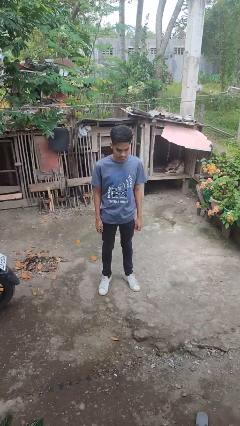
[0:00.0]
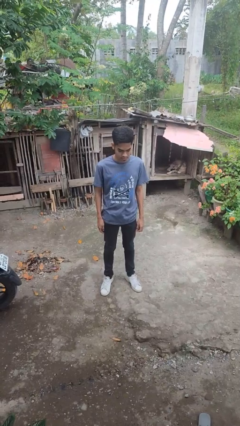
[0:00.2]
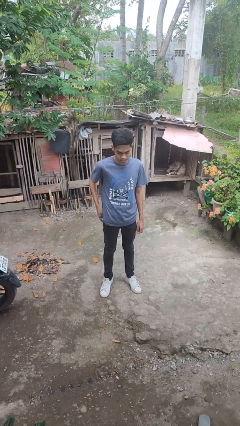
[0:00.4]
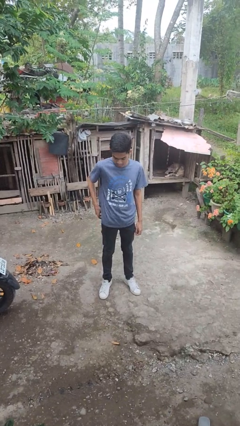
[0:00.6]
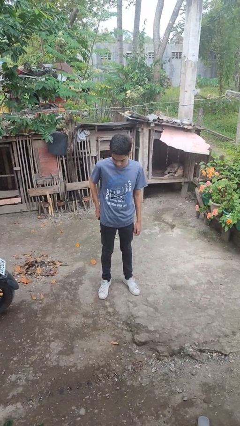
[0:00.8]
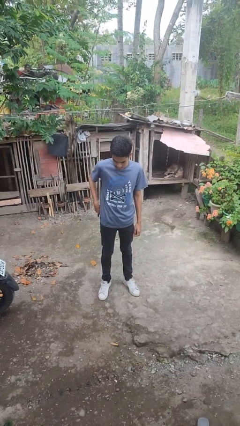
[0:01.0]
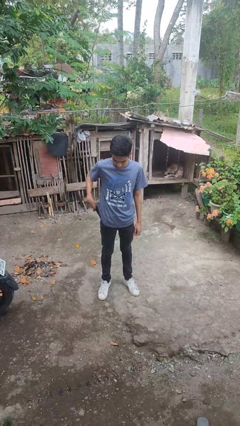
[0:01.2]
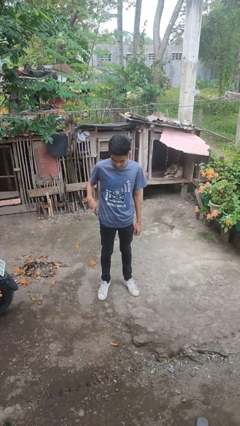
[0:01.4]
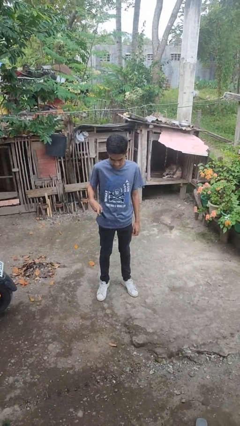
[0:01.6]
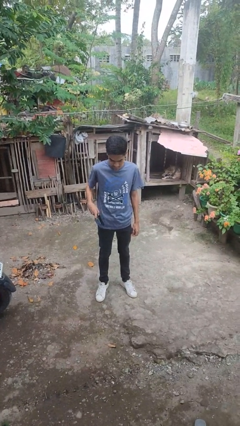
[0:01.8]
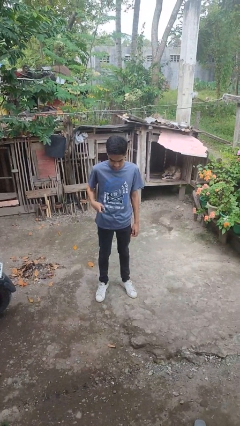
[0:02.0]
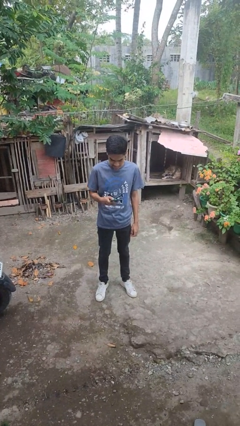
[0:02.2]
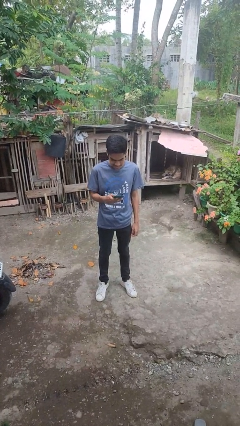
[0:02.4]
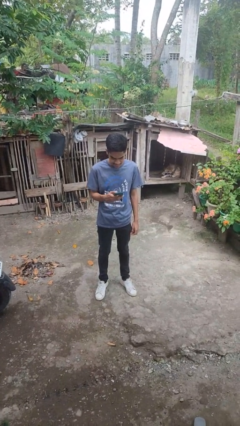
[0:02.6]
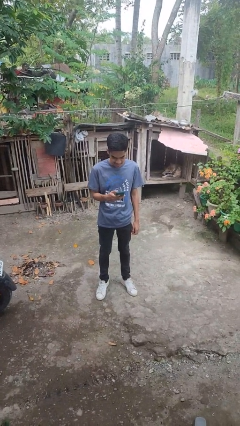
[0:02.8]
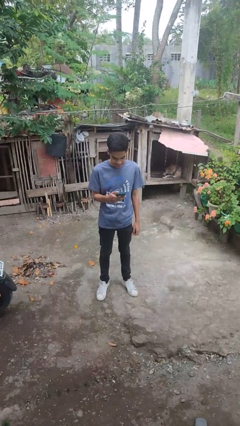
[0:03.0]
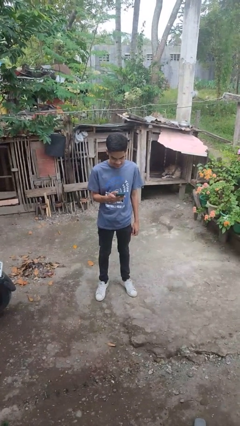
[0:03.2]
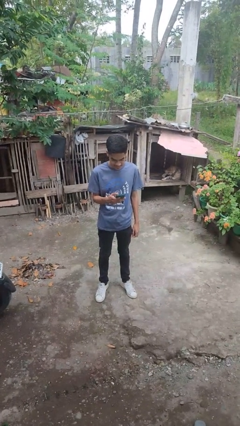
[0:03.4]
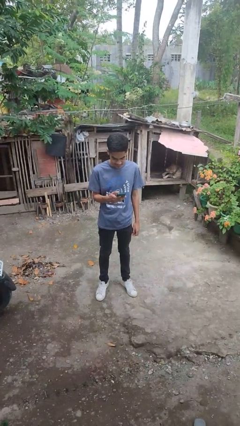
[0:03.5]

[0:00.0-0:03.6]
person takes phone from pocket

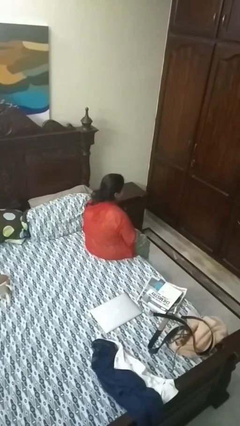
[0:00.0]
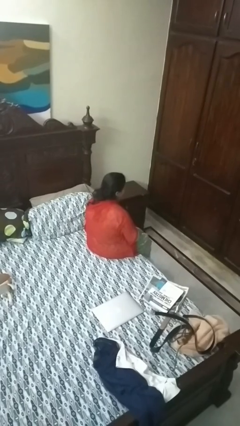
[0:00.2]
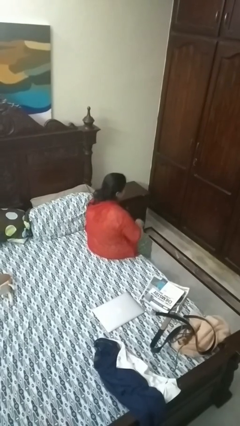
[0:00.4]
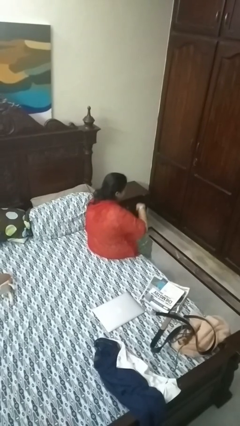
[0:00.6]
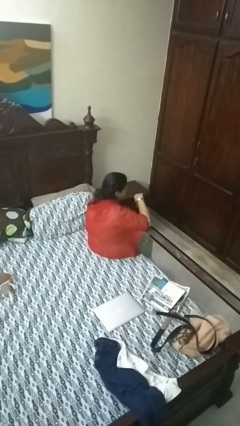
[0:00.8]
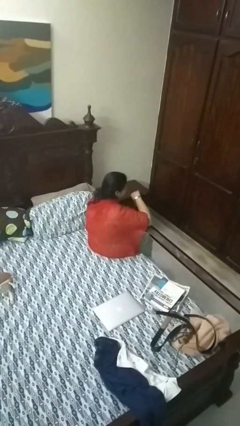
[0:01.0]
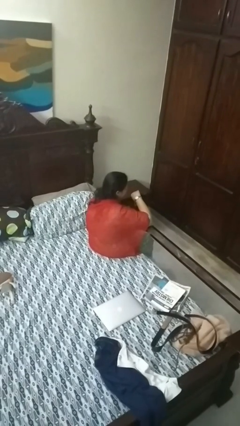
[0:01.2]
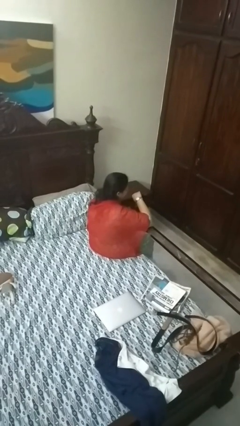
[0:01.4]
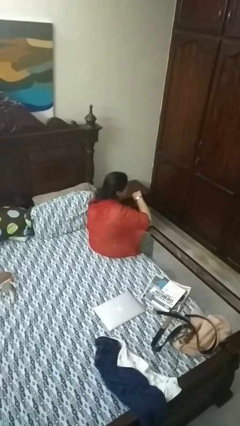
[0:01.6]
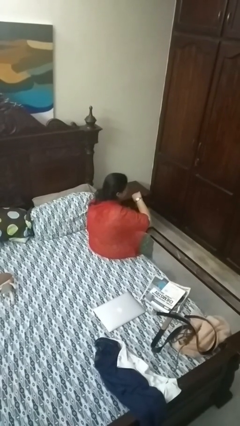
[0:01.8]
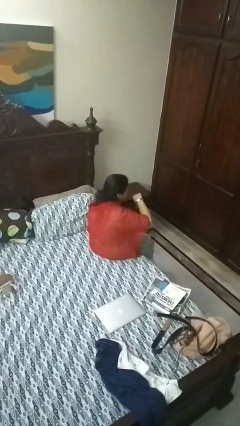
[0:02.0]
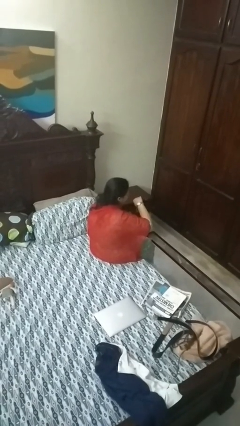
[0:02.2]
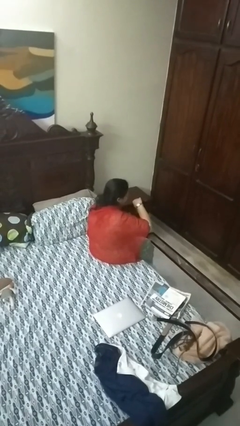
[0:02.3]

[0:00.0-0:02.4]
person looks at wristwatch

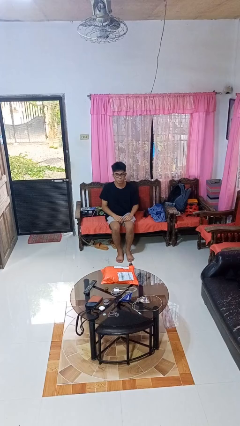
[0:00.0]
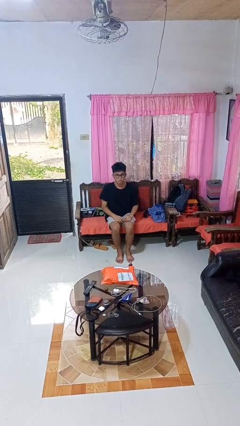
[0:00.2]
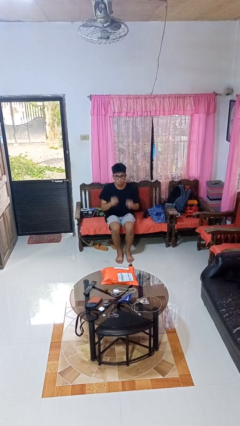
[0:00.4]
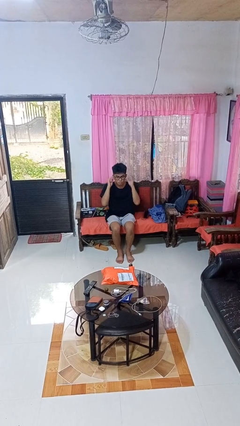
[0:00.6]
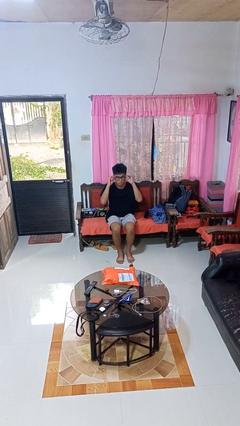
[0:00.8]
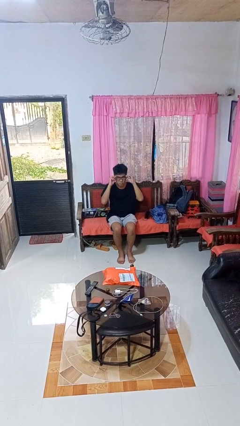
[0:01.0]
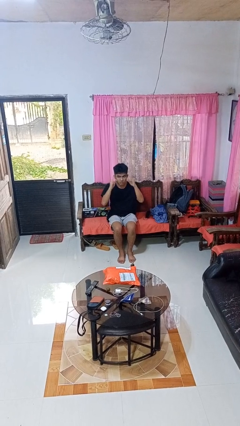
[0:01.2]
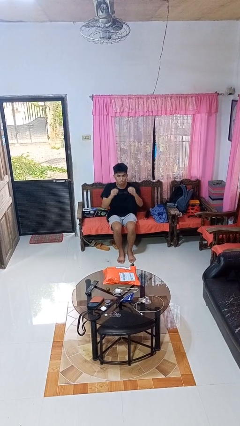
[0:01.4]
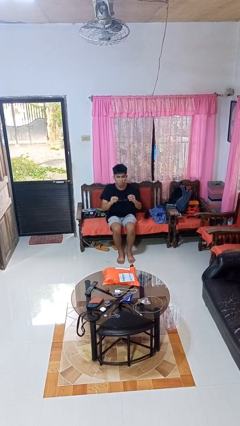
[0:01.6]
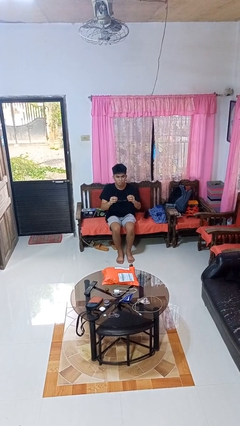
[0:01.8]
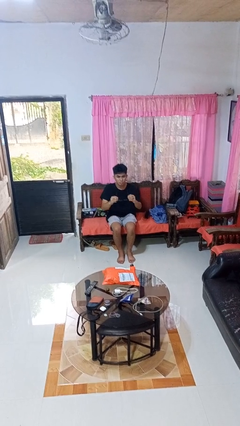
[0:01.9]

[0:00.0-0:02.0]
person takes off glasses

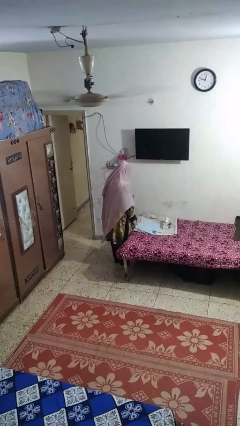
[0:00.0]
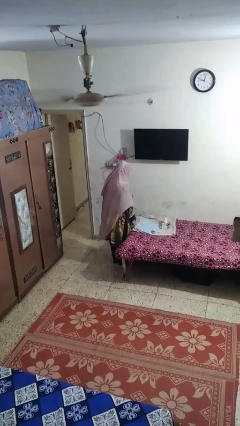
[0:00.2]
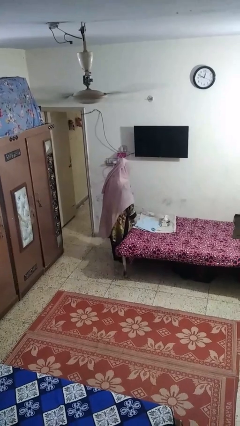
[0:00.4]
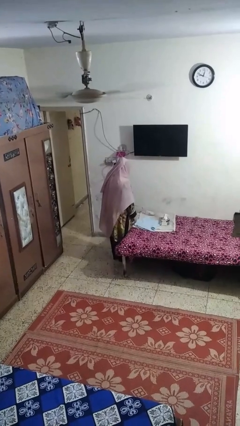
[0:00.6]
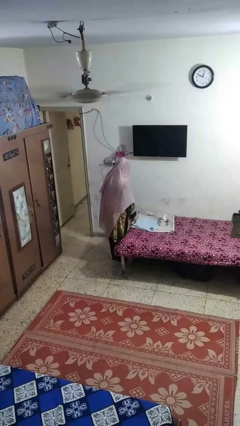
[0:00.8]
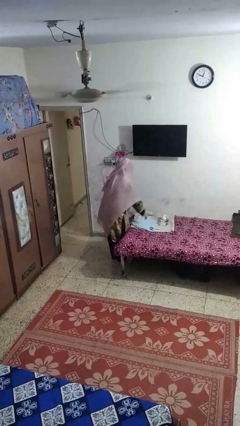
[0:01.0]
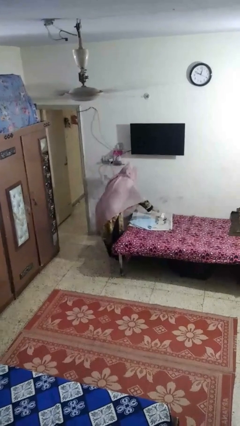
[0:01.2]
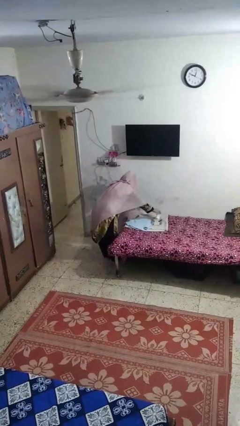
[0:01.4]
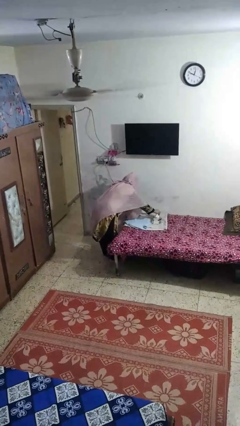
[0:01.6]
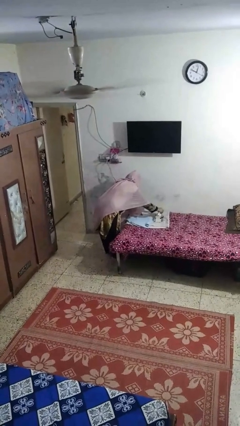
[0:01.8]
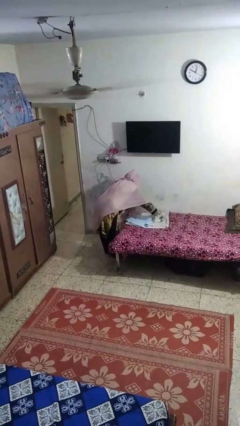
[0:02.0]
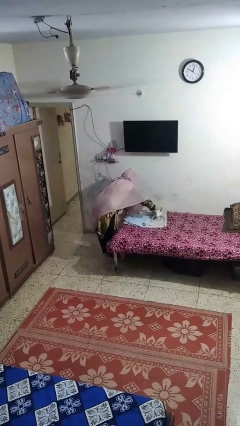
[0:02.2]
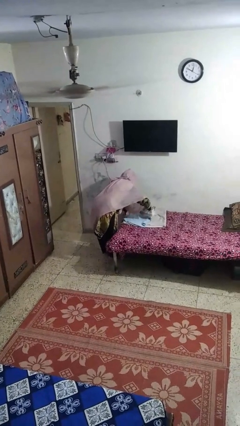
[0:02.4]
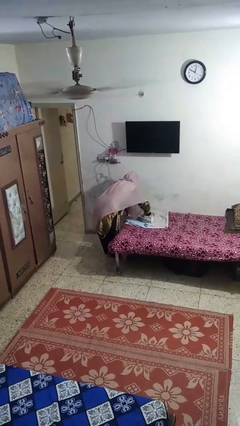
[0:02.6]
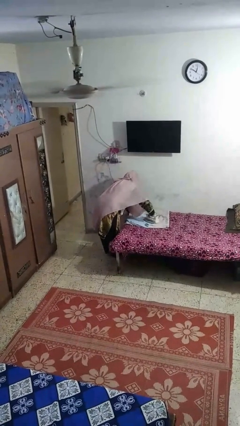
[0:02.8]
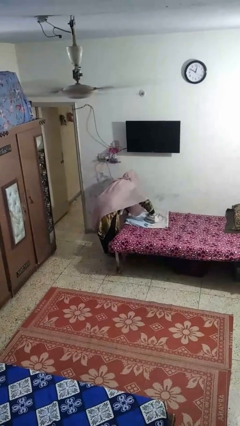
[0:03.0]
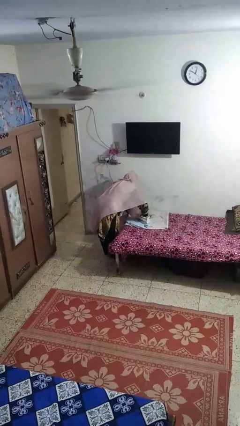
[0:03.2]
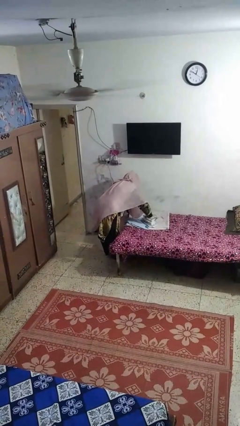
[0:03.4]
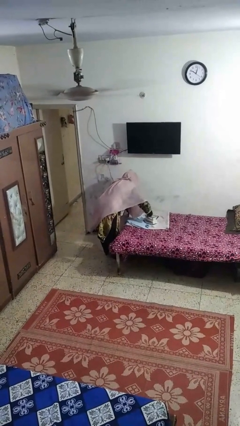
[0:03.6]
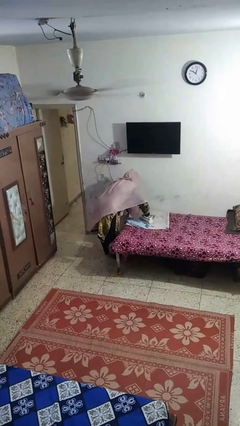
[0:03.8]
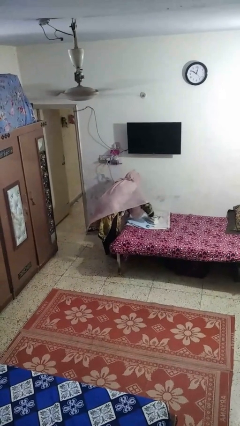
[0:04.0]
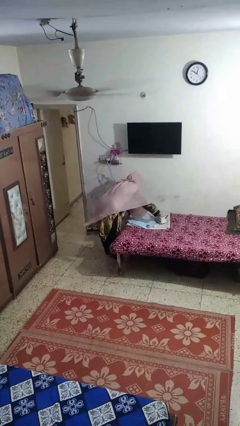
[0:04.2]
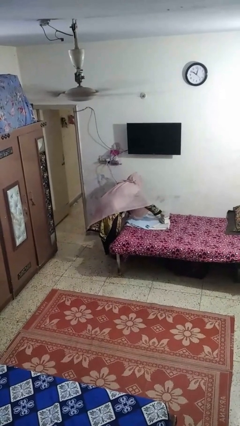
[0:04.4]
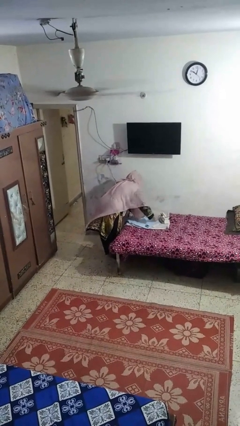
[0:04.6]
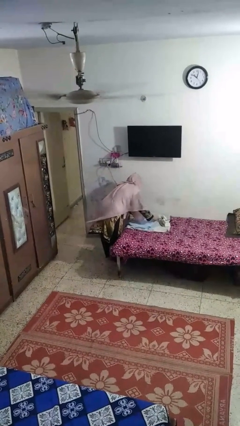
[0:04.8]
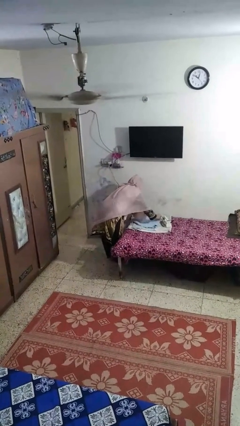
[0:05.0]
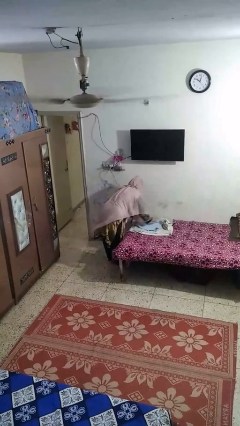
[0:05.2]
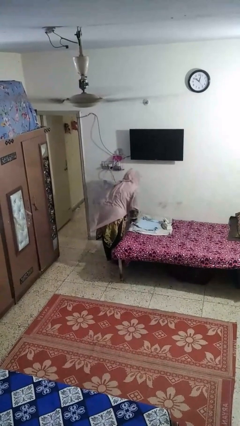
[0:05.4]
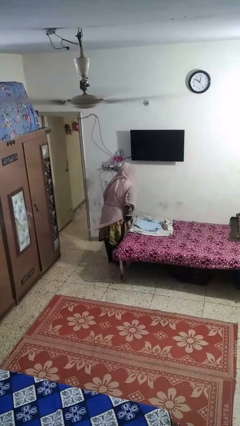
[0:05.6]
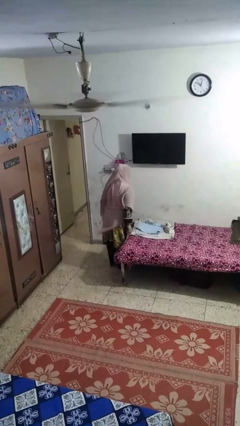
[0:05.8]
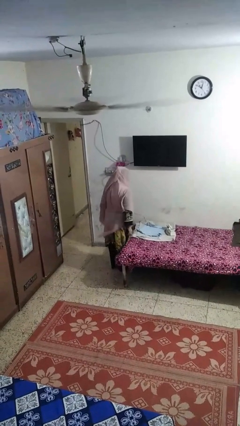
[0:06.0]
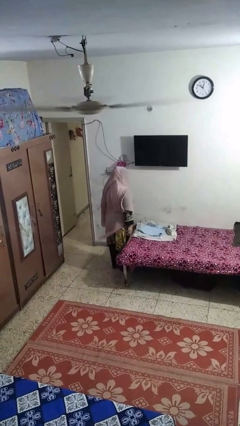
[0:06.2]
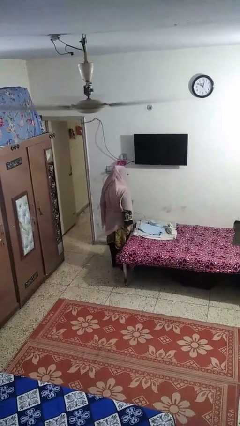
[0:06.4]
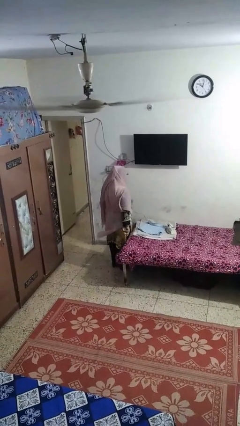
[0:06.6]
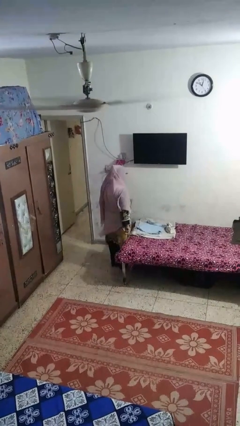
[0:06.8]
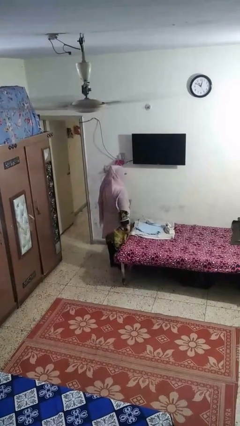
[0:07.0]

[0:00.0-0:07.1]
person irons clothes

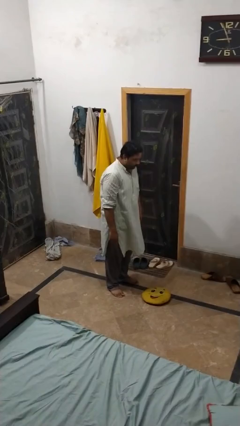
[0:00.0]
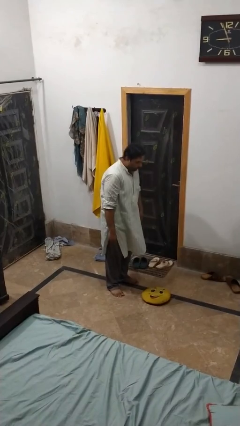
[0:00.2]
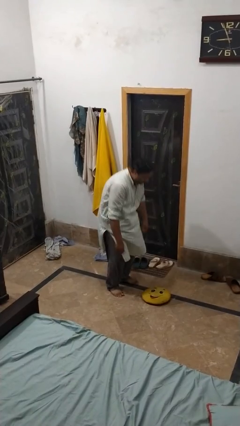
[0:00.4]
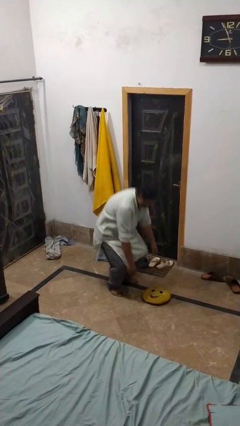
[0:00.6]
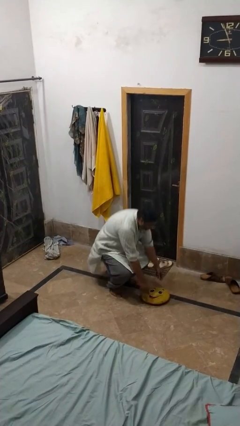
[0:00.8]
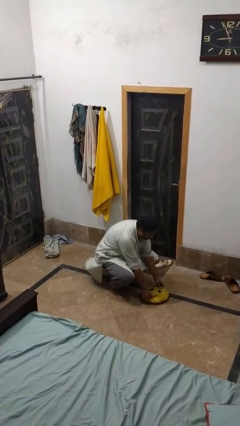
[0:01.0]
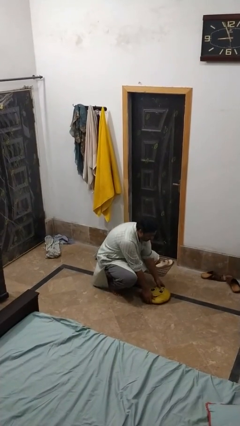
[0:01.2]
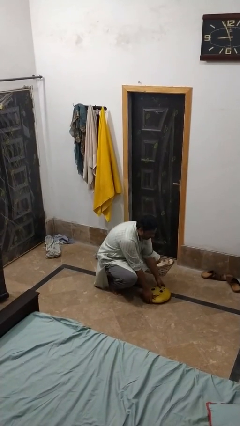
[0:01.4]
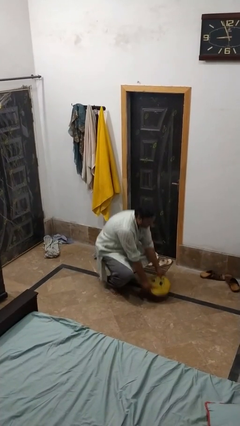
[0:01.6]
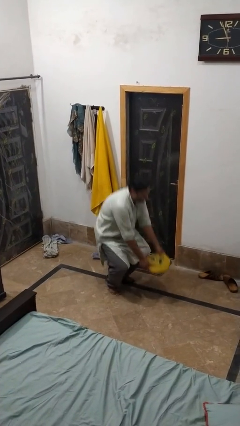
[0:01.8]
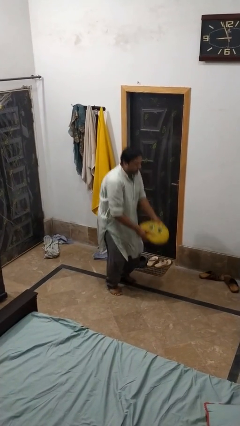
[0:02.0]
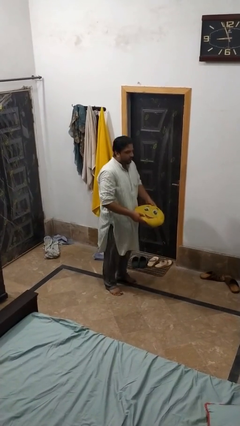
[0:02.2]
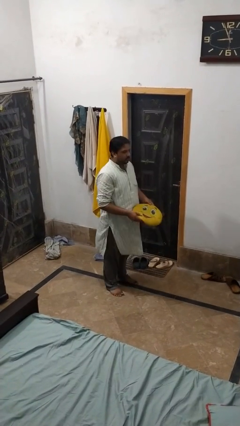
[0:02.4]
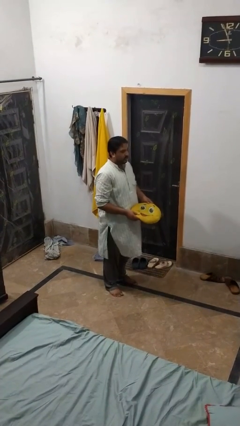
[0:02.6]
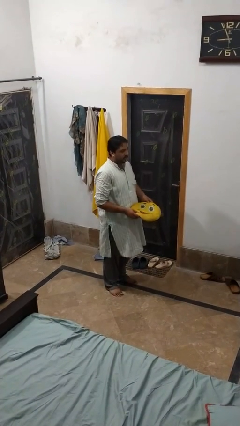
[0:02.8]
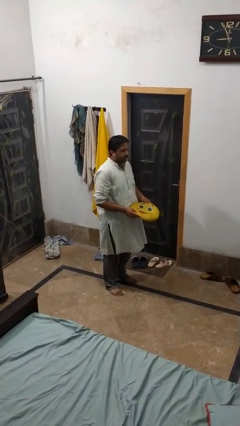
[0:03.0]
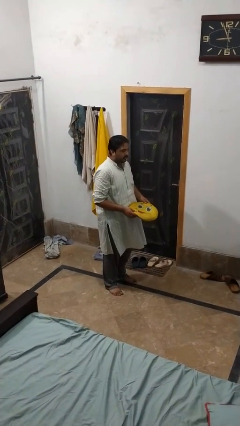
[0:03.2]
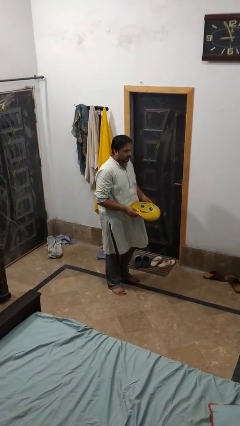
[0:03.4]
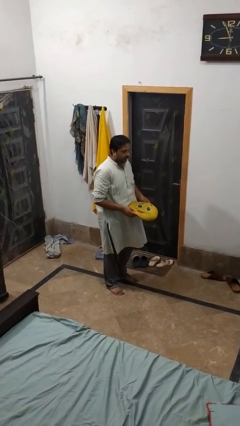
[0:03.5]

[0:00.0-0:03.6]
person picks up object from floor
